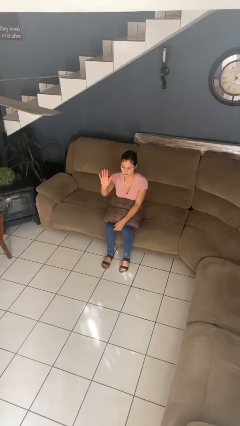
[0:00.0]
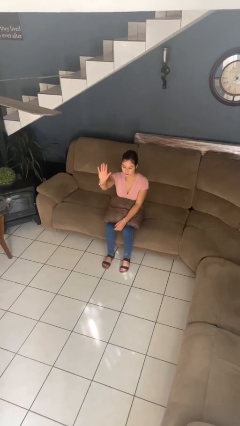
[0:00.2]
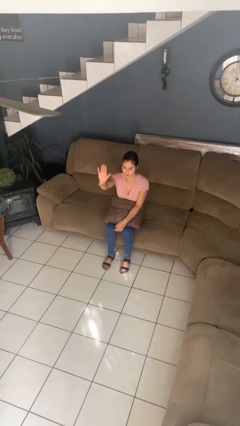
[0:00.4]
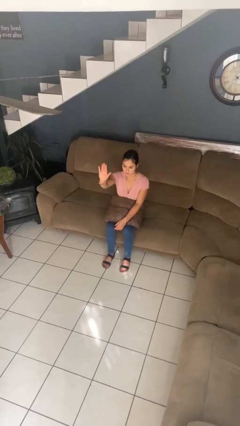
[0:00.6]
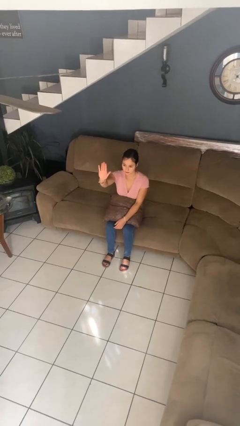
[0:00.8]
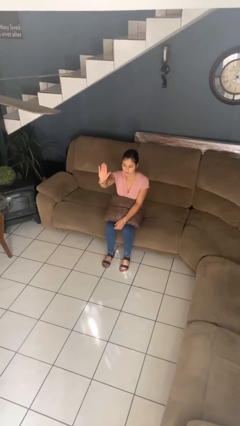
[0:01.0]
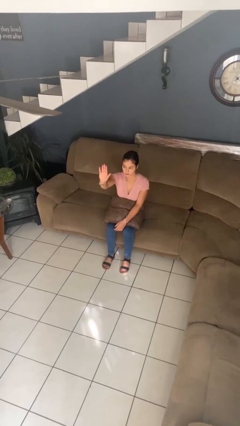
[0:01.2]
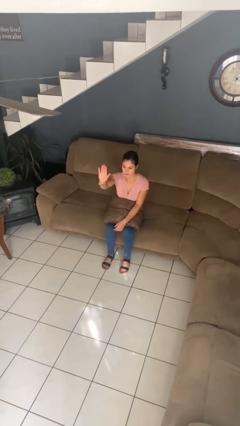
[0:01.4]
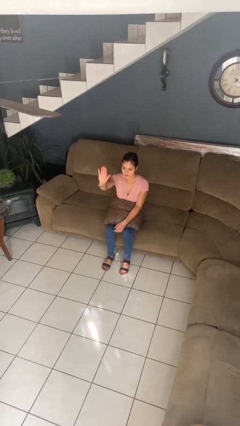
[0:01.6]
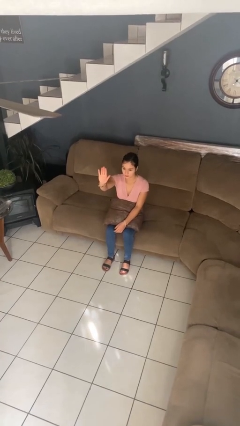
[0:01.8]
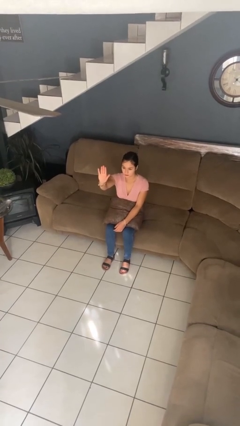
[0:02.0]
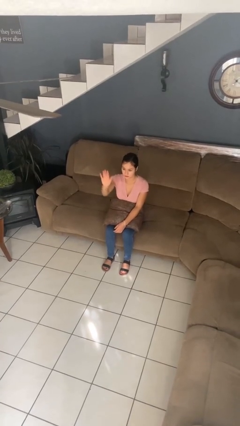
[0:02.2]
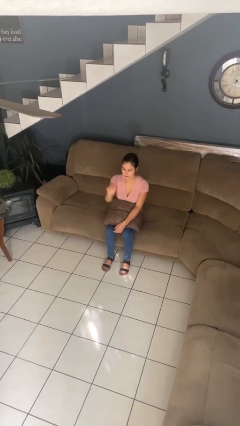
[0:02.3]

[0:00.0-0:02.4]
person gestures stop

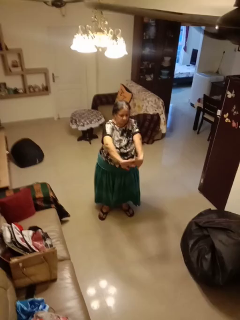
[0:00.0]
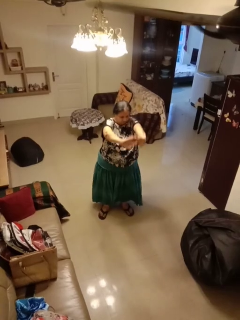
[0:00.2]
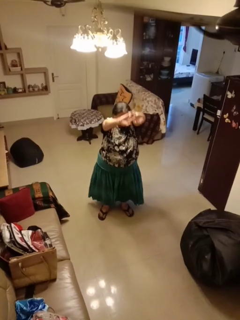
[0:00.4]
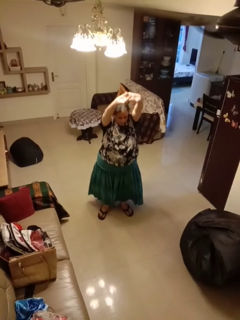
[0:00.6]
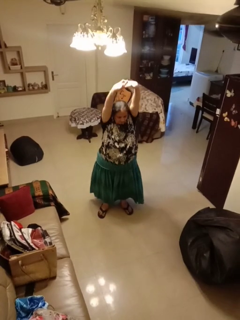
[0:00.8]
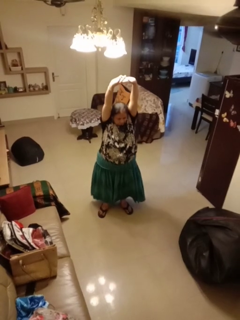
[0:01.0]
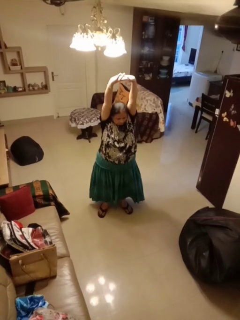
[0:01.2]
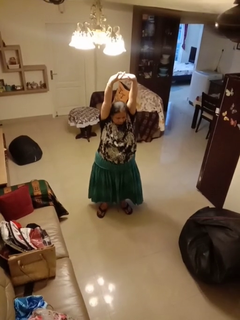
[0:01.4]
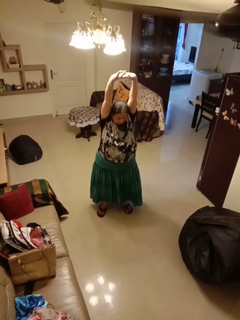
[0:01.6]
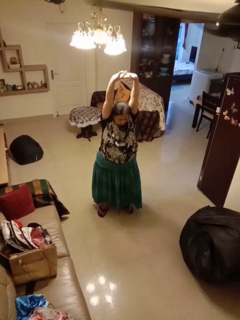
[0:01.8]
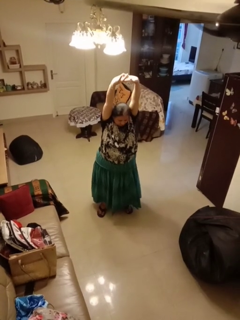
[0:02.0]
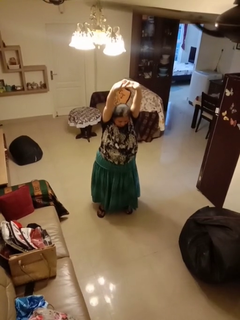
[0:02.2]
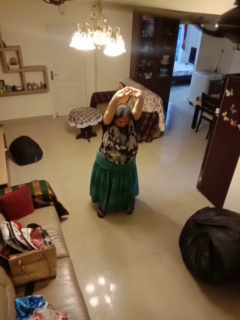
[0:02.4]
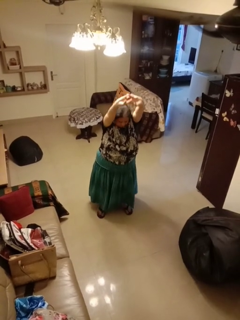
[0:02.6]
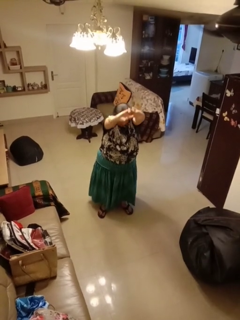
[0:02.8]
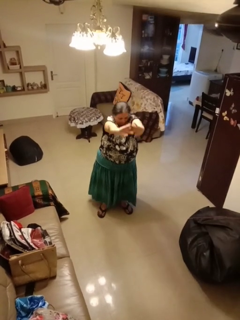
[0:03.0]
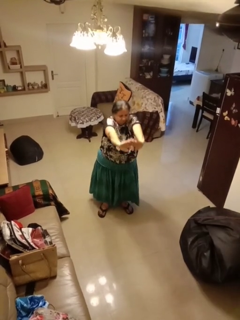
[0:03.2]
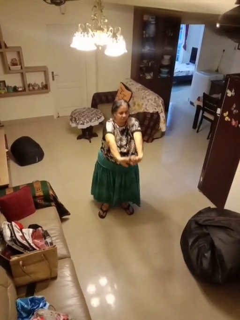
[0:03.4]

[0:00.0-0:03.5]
person stretches arms over head

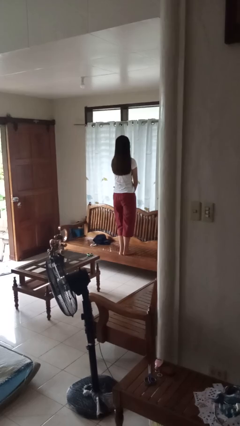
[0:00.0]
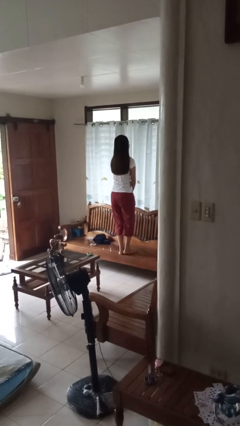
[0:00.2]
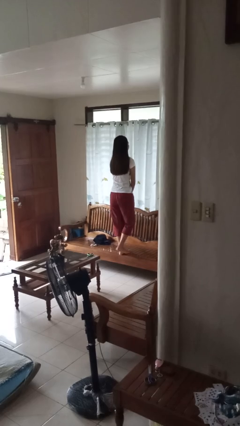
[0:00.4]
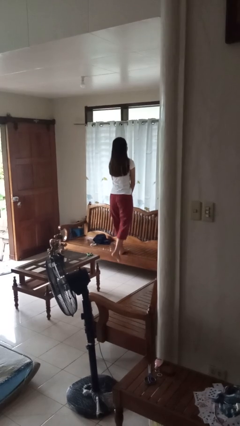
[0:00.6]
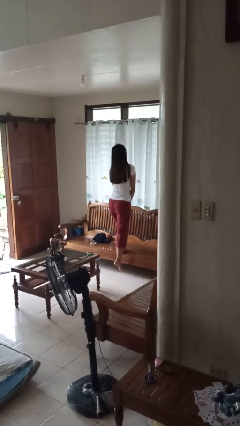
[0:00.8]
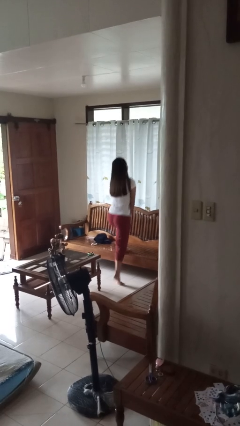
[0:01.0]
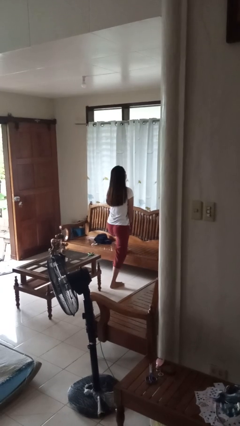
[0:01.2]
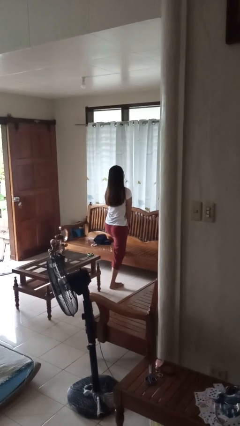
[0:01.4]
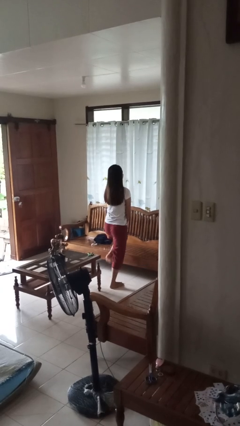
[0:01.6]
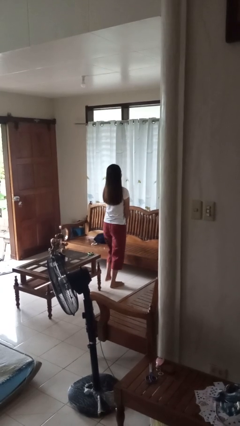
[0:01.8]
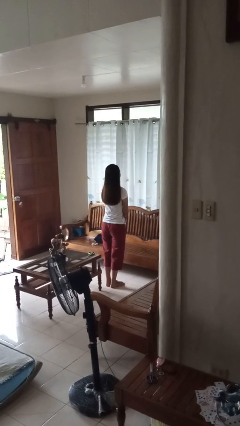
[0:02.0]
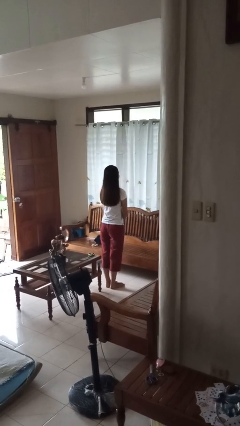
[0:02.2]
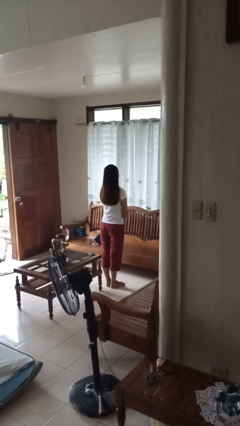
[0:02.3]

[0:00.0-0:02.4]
person climbs off chair

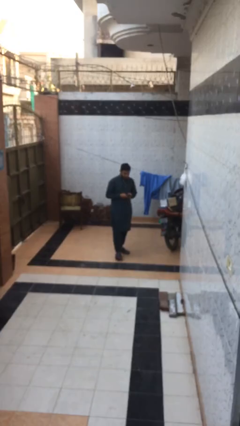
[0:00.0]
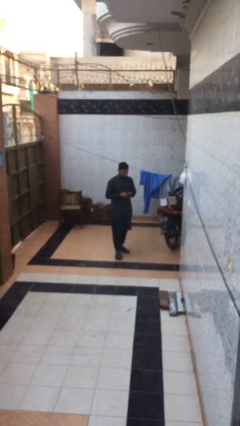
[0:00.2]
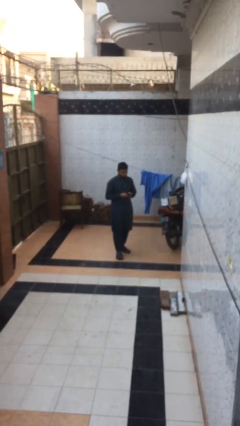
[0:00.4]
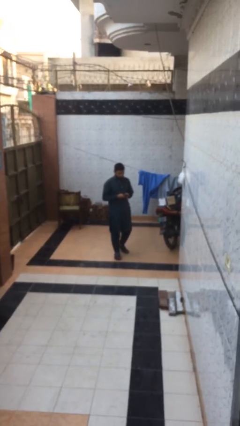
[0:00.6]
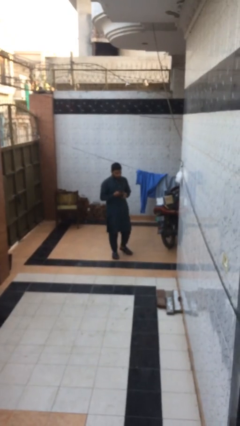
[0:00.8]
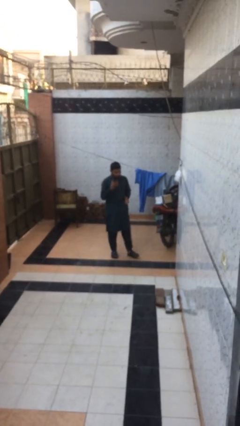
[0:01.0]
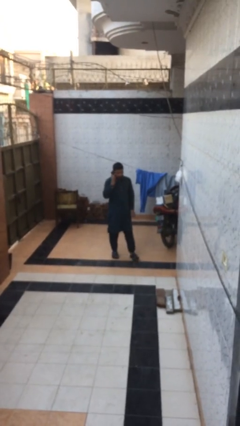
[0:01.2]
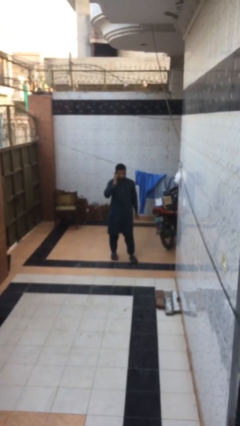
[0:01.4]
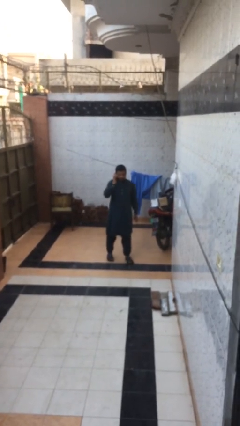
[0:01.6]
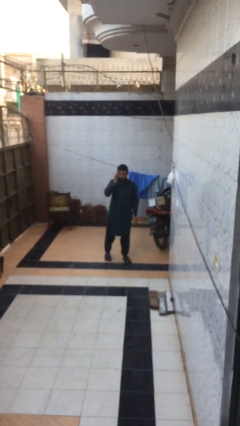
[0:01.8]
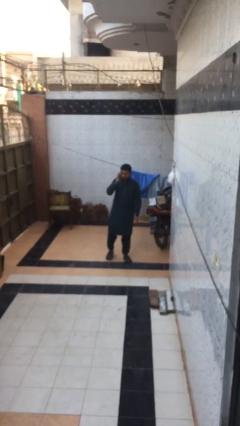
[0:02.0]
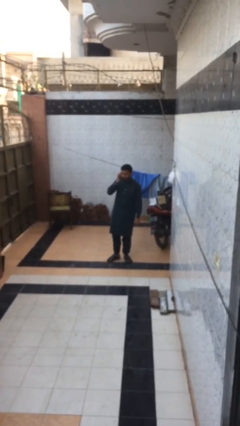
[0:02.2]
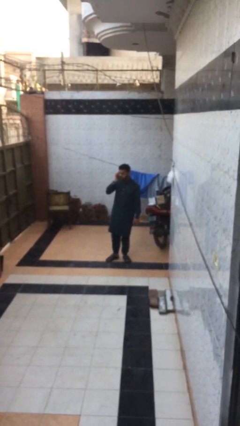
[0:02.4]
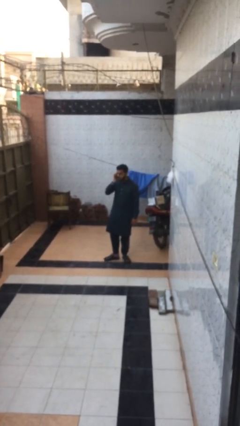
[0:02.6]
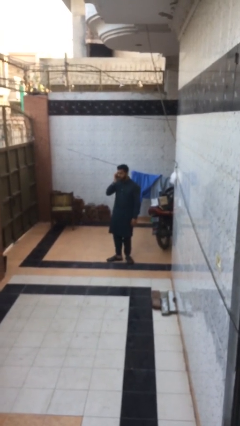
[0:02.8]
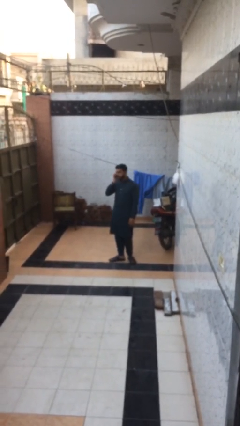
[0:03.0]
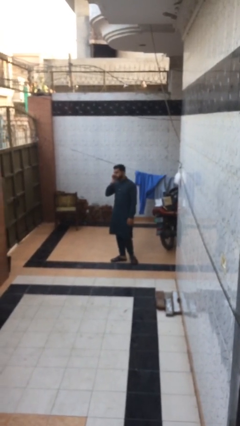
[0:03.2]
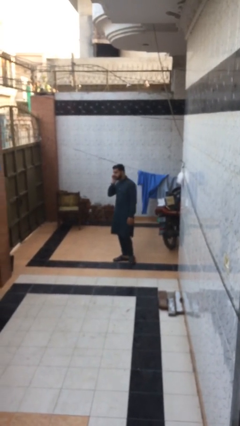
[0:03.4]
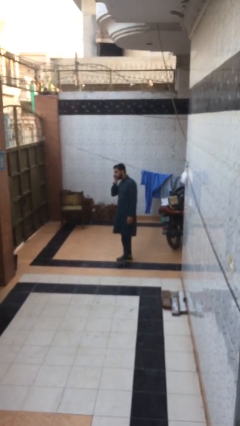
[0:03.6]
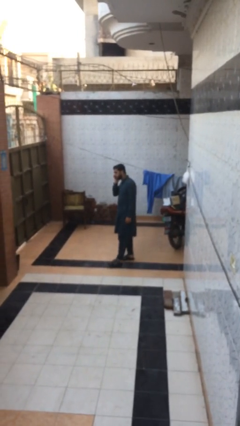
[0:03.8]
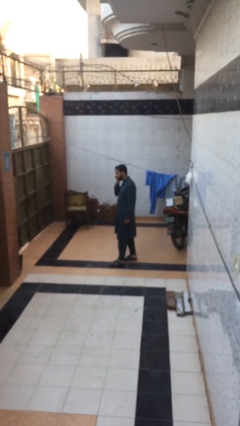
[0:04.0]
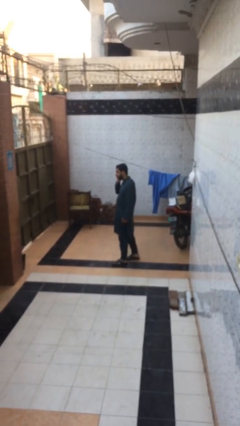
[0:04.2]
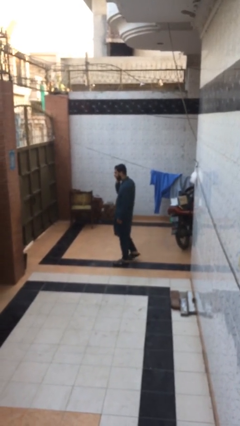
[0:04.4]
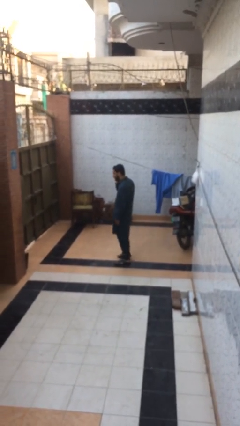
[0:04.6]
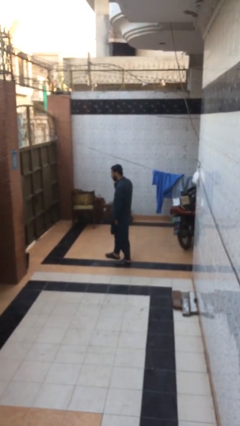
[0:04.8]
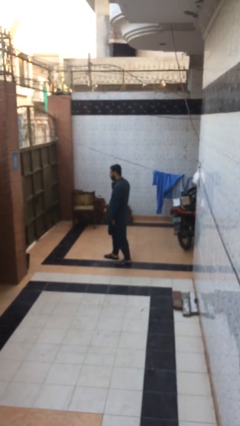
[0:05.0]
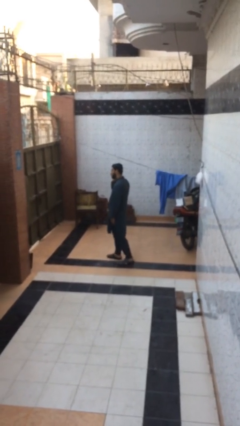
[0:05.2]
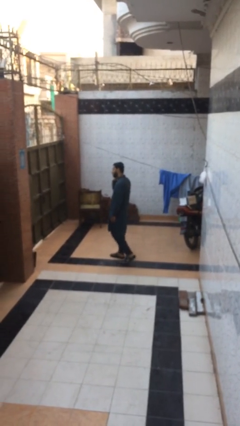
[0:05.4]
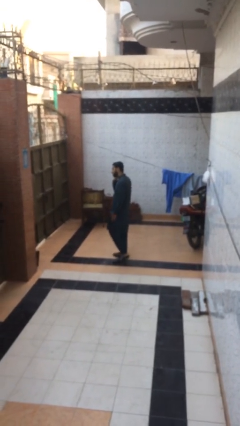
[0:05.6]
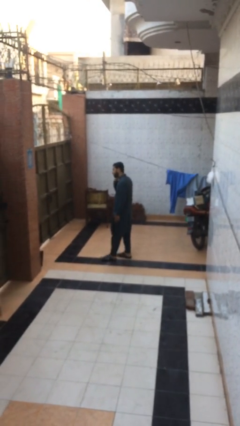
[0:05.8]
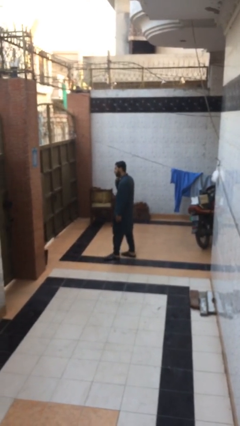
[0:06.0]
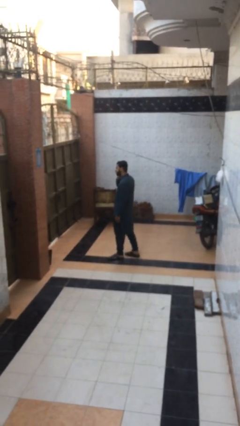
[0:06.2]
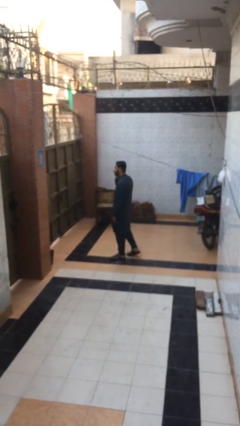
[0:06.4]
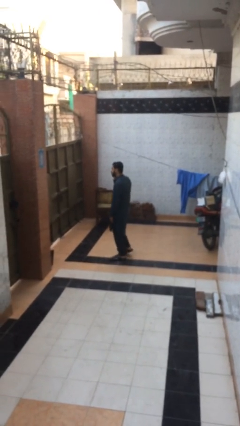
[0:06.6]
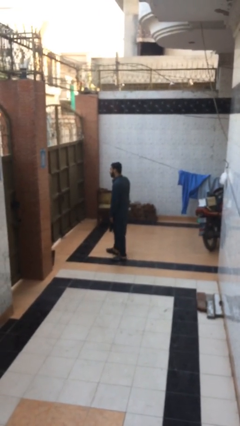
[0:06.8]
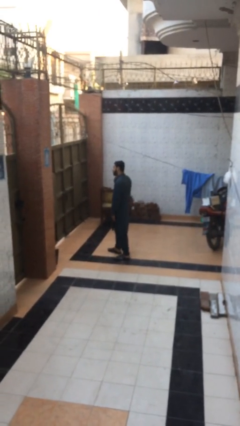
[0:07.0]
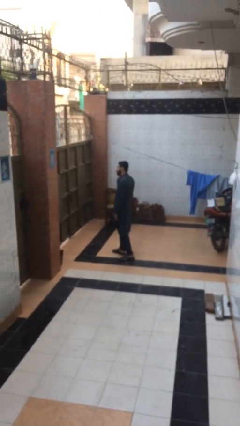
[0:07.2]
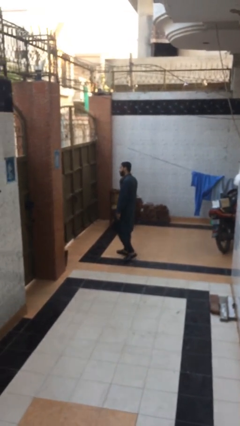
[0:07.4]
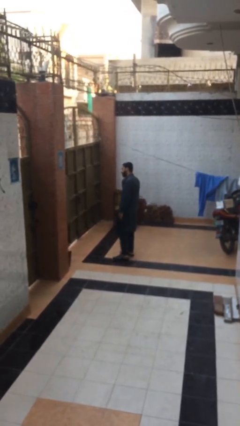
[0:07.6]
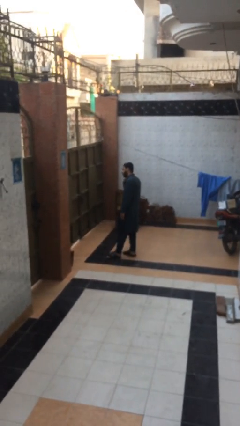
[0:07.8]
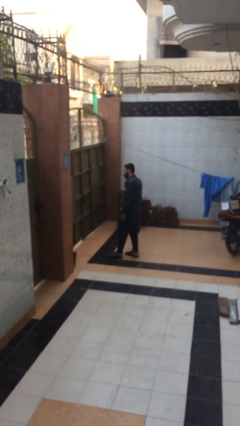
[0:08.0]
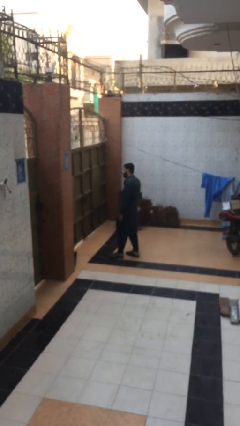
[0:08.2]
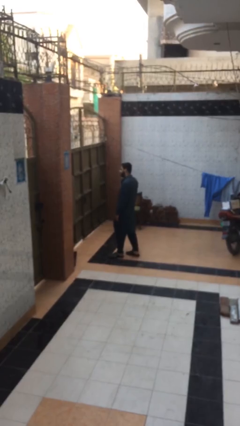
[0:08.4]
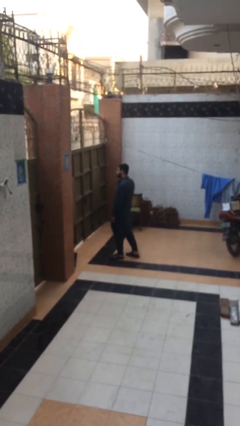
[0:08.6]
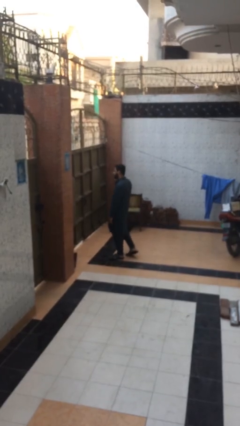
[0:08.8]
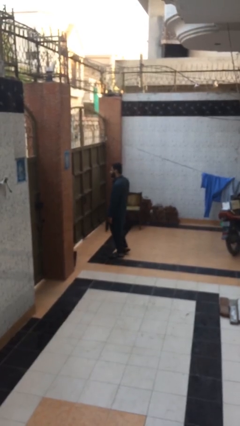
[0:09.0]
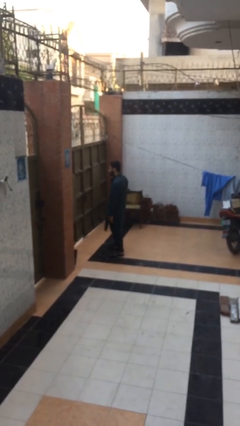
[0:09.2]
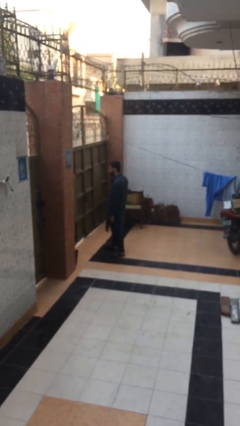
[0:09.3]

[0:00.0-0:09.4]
person talks on phone

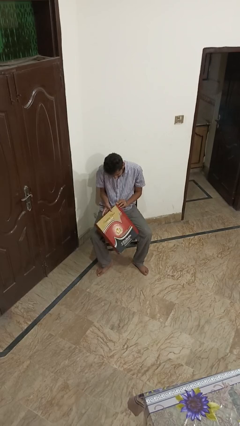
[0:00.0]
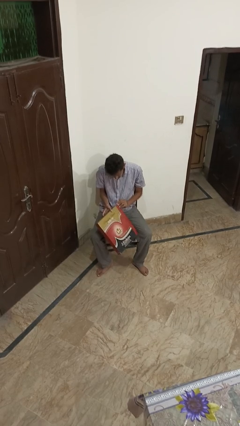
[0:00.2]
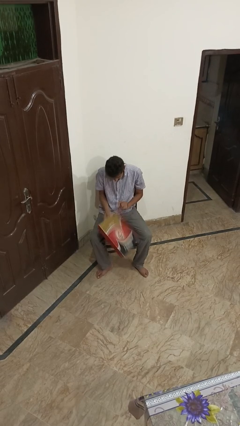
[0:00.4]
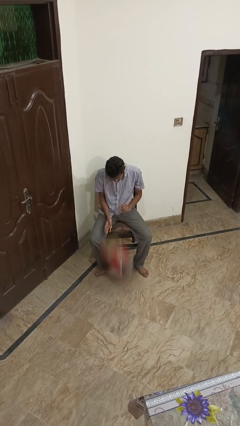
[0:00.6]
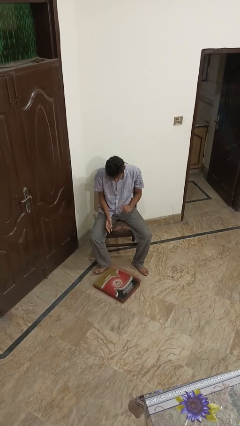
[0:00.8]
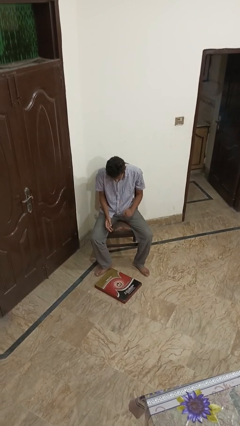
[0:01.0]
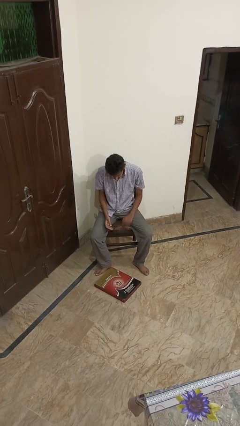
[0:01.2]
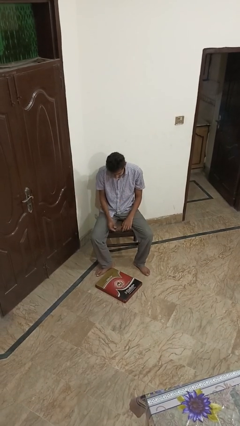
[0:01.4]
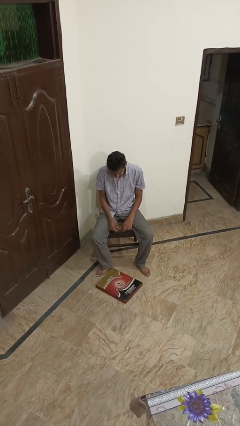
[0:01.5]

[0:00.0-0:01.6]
person drops object
